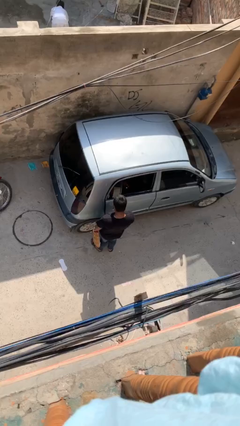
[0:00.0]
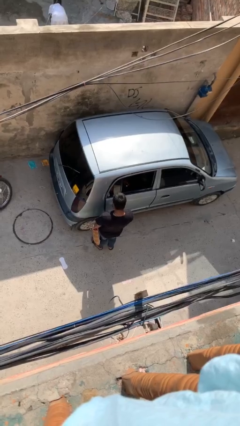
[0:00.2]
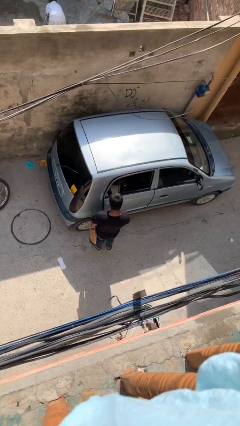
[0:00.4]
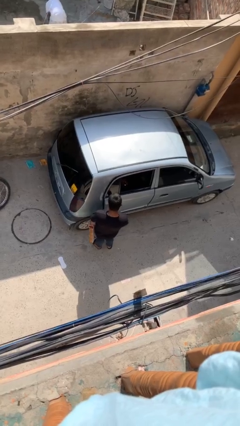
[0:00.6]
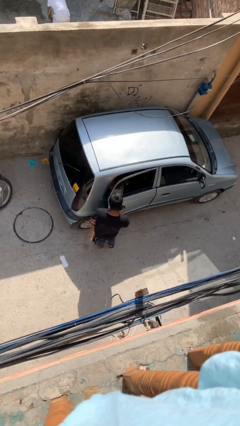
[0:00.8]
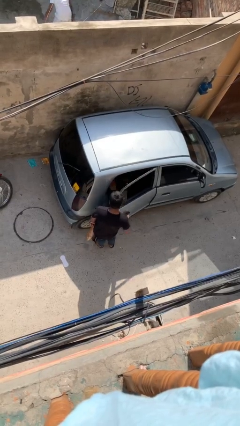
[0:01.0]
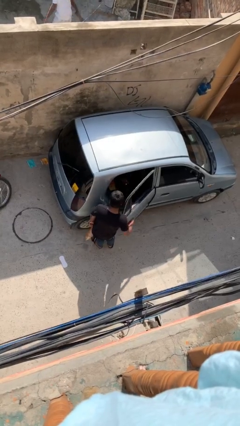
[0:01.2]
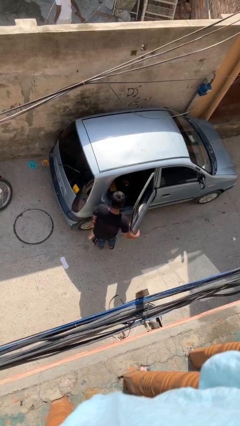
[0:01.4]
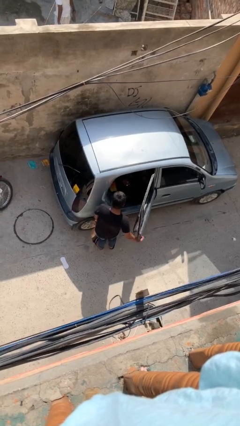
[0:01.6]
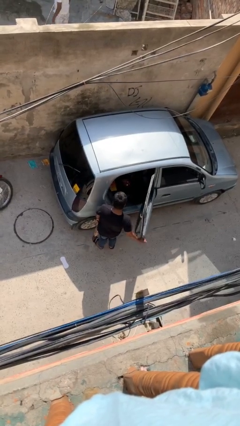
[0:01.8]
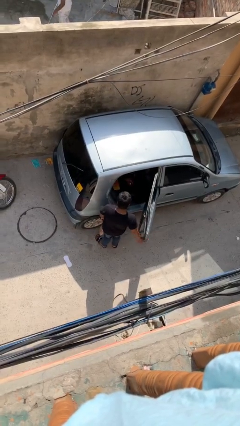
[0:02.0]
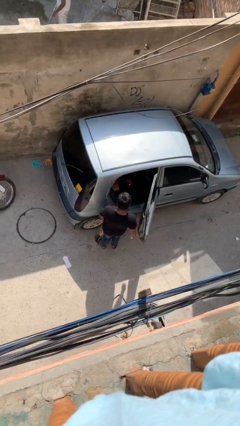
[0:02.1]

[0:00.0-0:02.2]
person opens car door

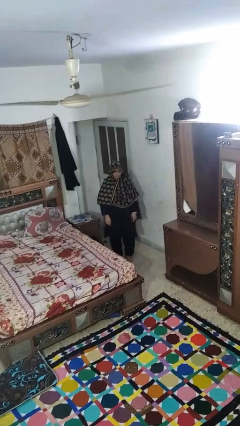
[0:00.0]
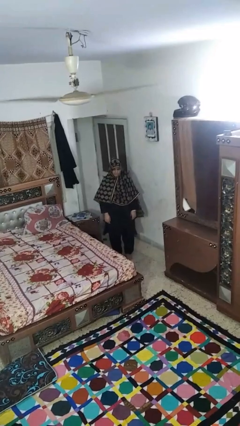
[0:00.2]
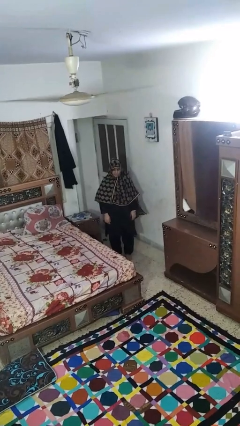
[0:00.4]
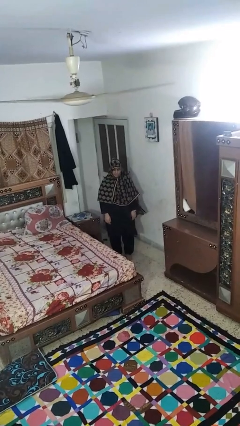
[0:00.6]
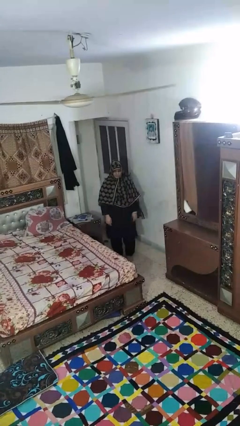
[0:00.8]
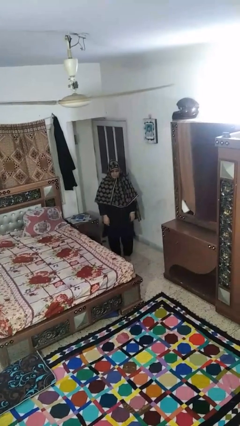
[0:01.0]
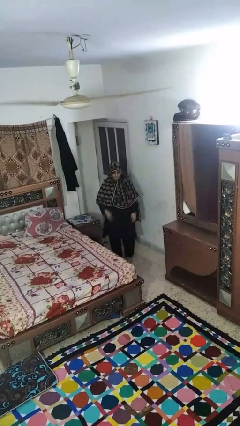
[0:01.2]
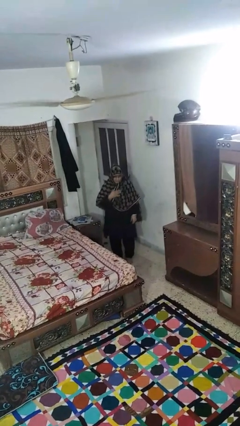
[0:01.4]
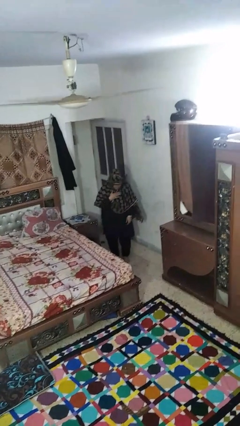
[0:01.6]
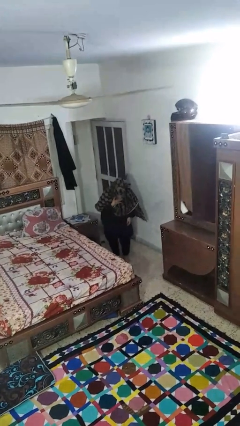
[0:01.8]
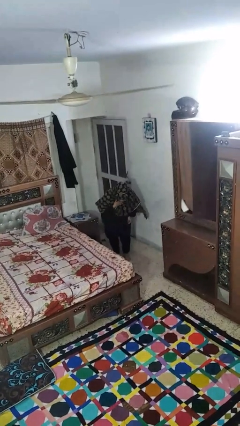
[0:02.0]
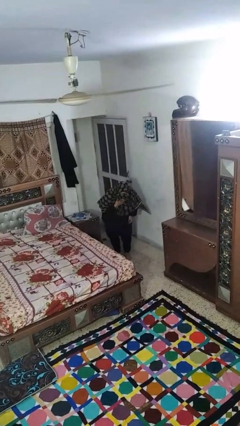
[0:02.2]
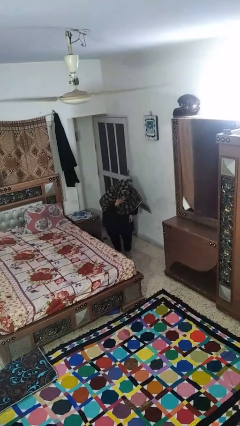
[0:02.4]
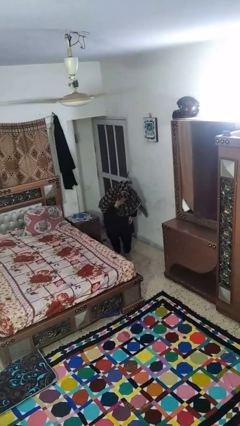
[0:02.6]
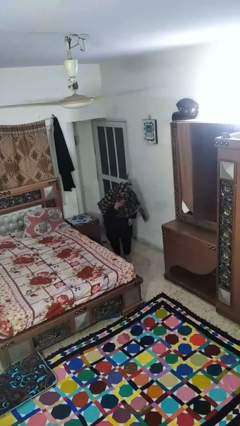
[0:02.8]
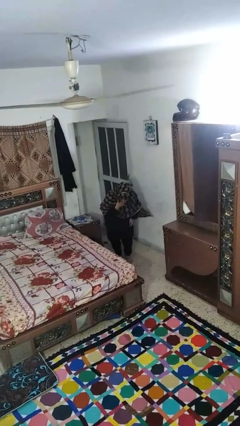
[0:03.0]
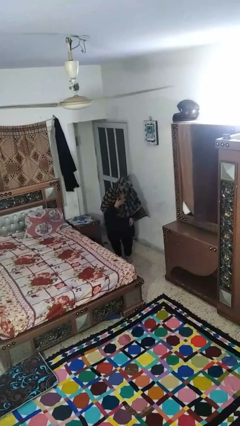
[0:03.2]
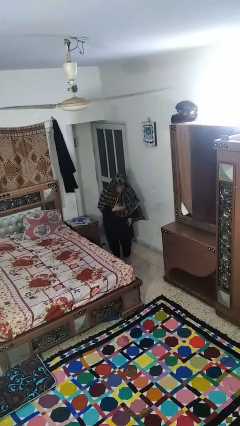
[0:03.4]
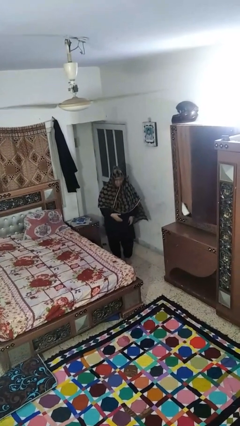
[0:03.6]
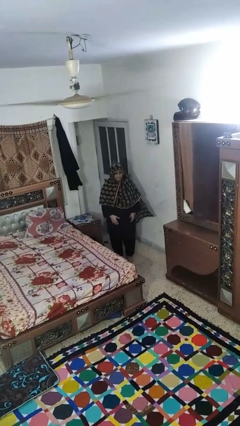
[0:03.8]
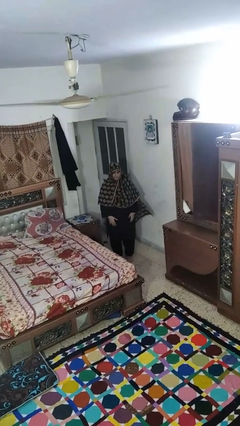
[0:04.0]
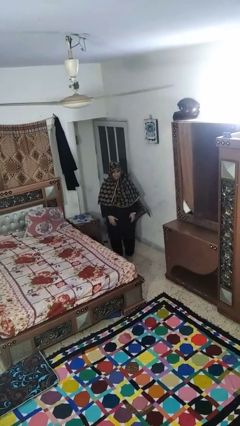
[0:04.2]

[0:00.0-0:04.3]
person bows

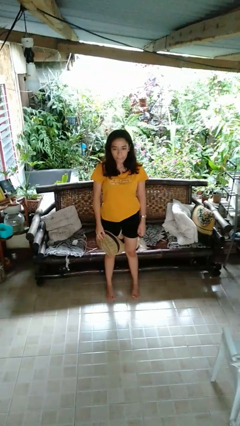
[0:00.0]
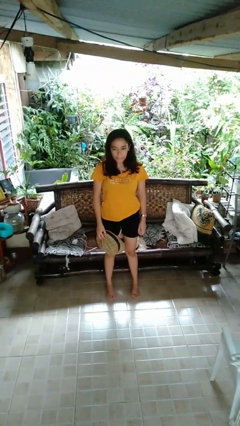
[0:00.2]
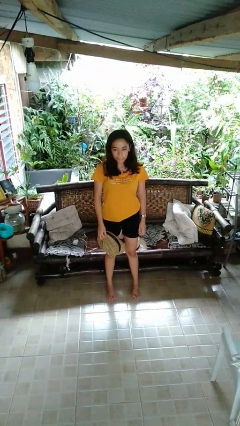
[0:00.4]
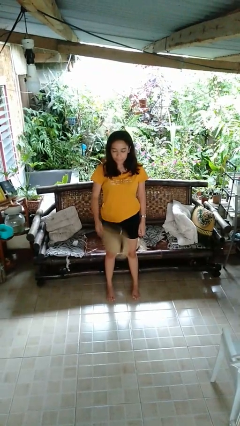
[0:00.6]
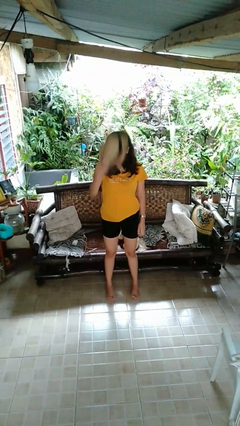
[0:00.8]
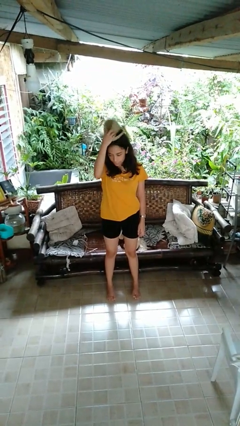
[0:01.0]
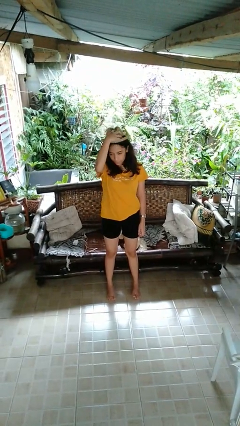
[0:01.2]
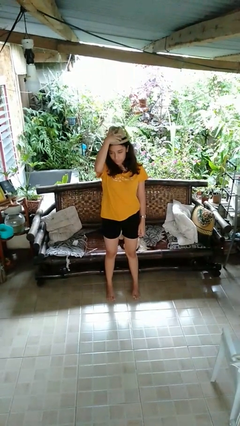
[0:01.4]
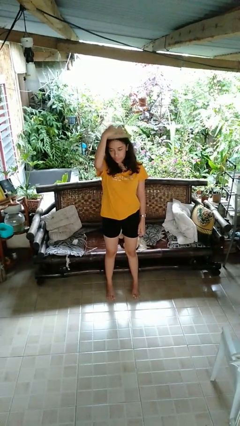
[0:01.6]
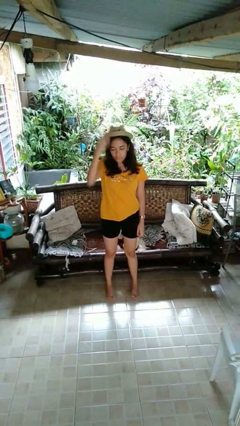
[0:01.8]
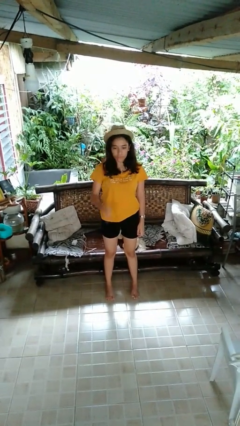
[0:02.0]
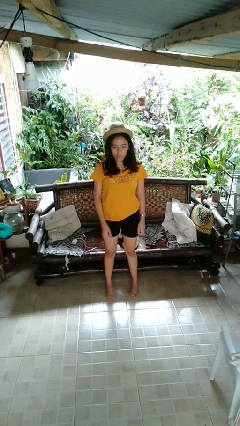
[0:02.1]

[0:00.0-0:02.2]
person puts on hat

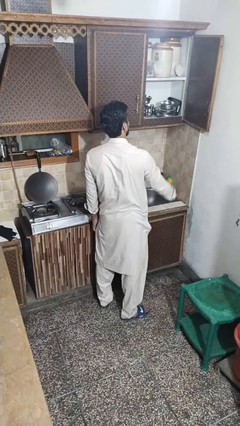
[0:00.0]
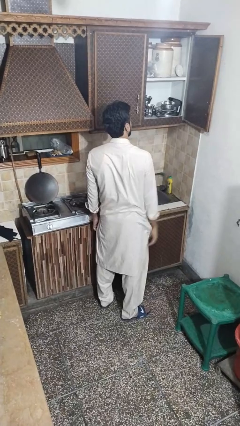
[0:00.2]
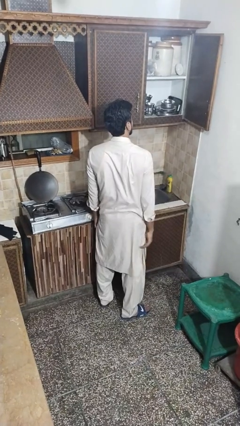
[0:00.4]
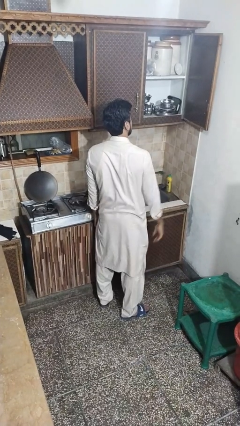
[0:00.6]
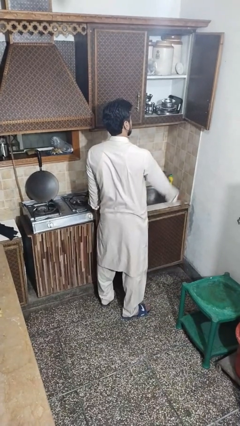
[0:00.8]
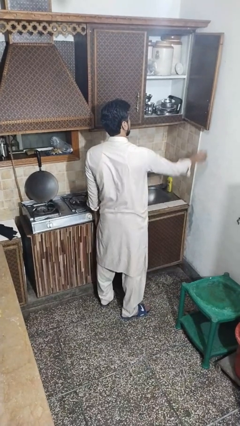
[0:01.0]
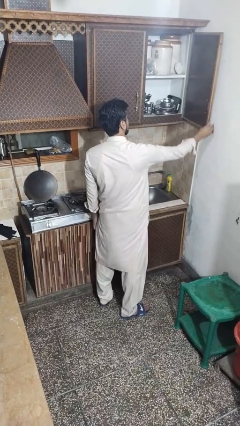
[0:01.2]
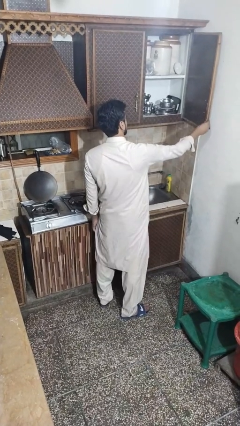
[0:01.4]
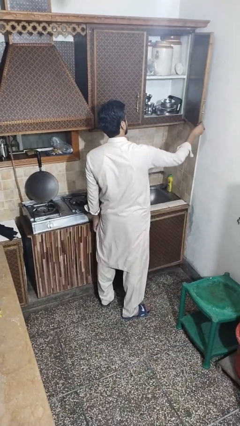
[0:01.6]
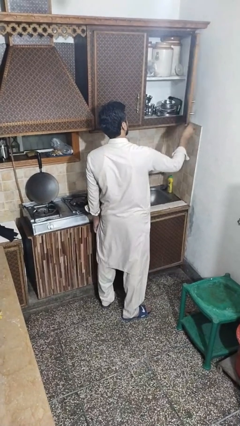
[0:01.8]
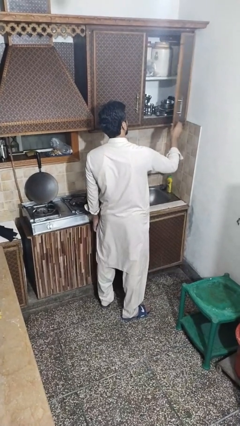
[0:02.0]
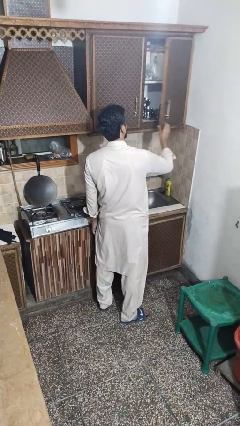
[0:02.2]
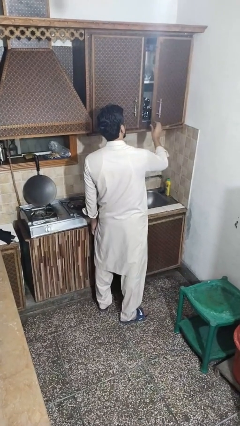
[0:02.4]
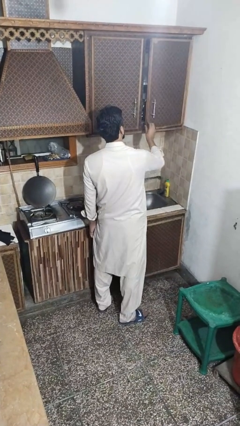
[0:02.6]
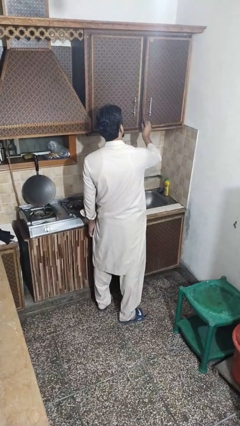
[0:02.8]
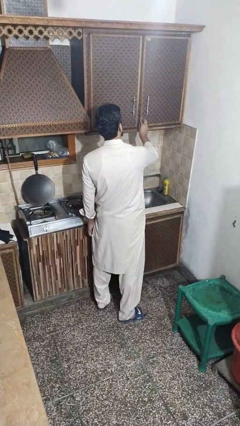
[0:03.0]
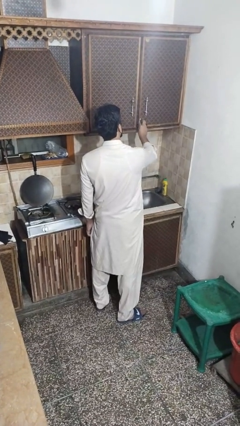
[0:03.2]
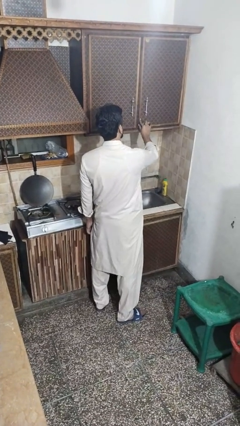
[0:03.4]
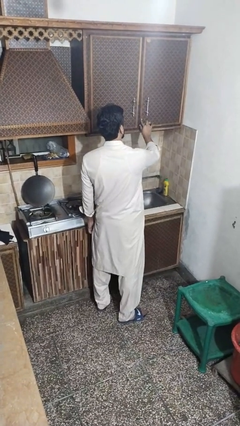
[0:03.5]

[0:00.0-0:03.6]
person closes cabinet

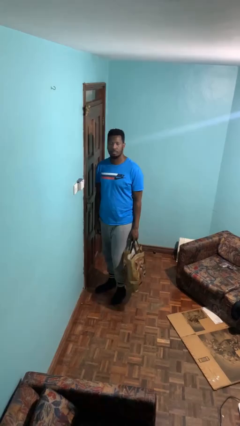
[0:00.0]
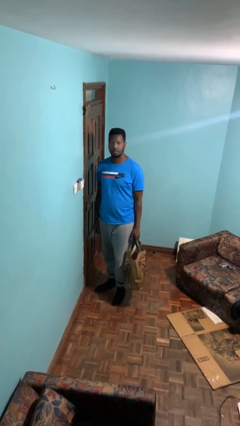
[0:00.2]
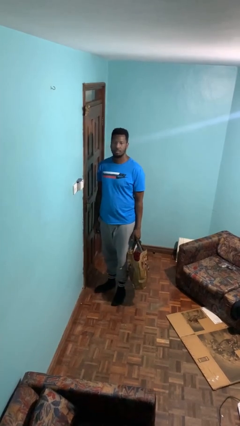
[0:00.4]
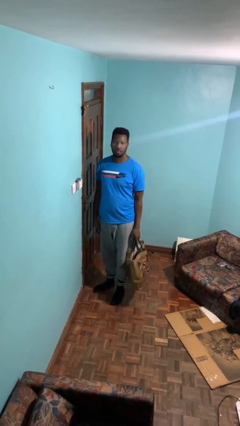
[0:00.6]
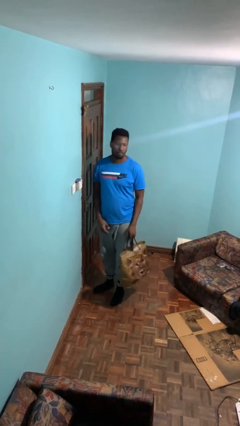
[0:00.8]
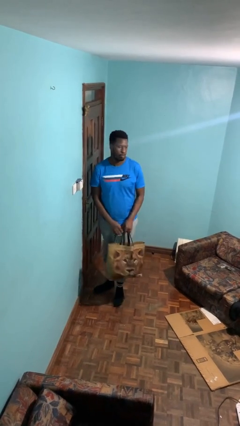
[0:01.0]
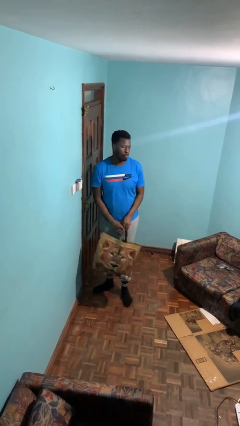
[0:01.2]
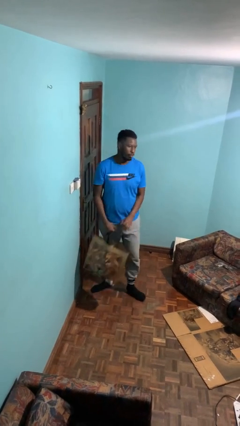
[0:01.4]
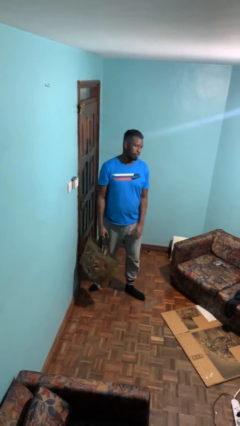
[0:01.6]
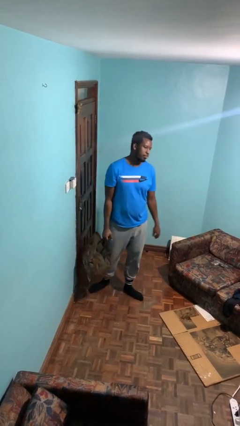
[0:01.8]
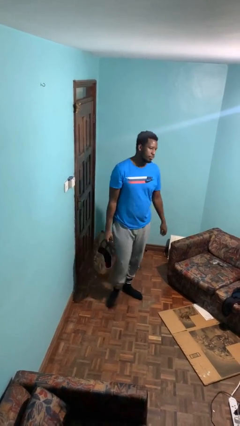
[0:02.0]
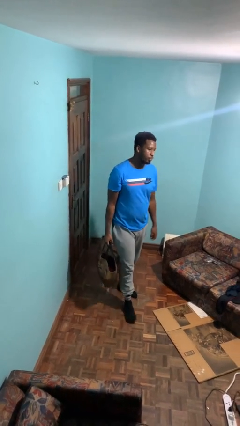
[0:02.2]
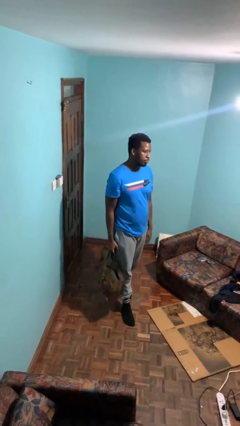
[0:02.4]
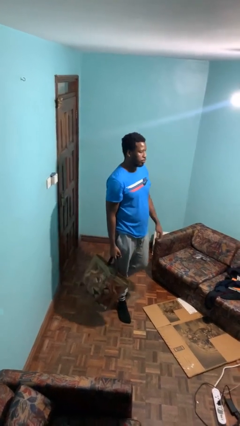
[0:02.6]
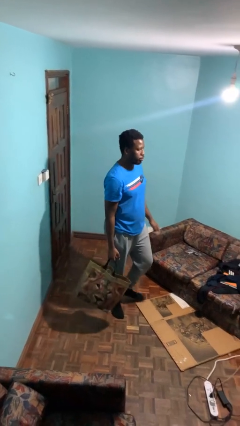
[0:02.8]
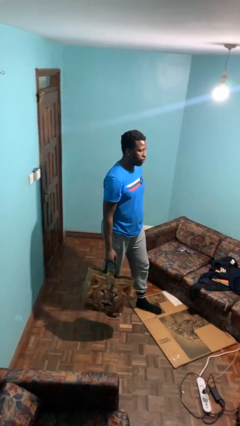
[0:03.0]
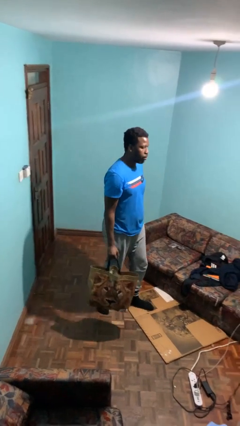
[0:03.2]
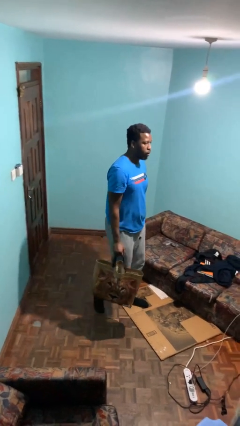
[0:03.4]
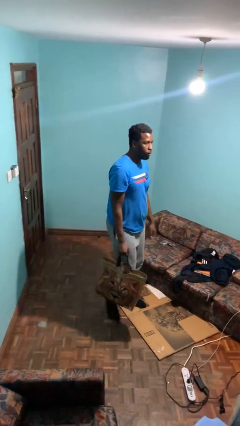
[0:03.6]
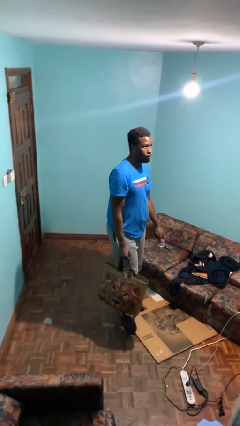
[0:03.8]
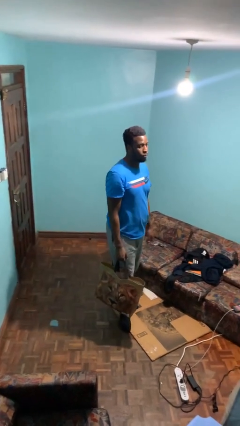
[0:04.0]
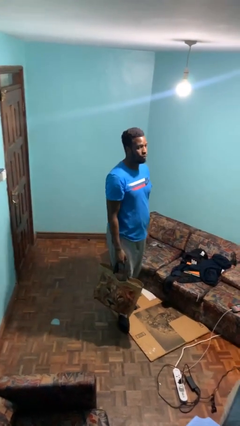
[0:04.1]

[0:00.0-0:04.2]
person carries groceries

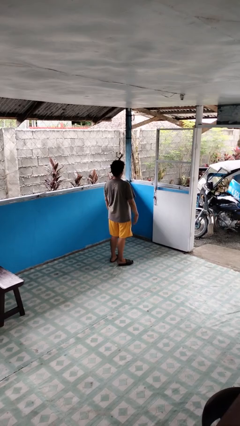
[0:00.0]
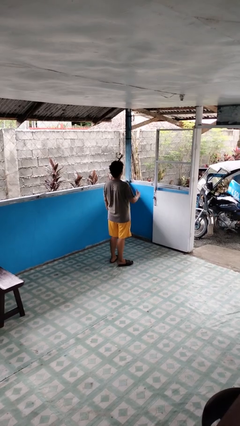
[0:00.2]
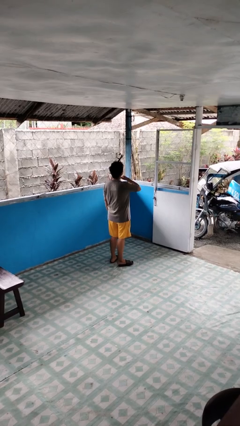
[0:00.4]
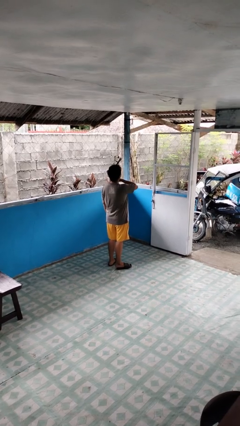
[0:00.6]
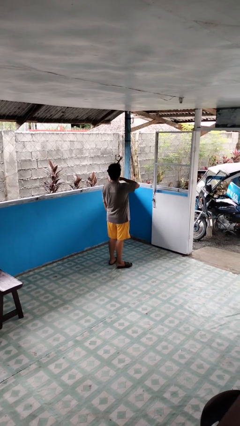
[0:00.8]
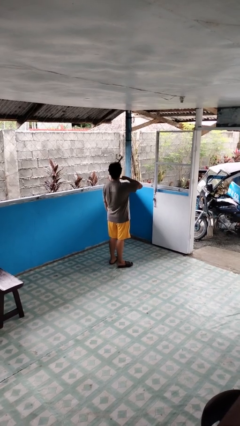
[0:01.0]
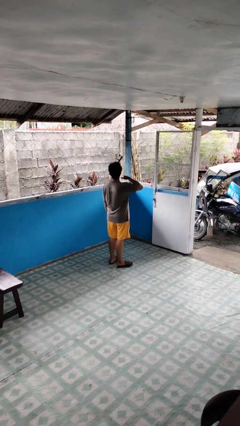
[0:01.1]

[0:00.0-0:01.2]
person gestures cut
